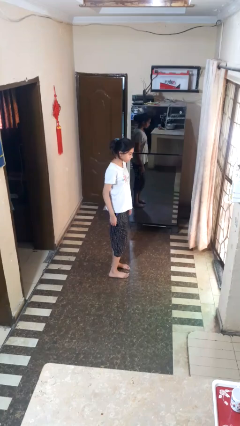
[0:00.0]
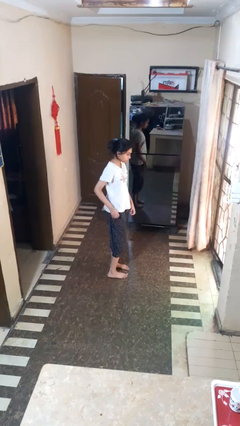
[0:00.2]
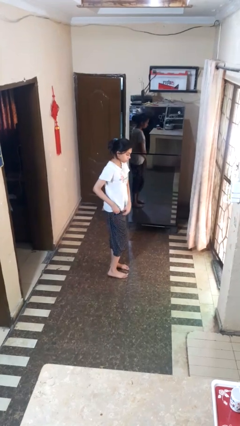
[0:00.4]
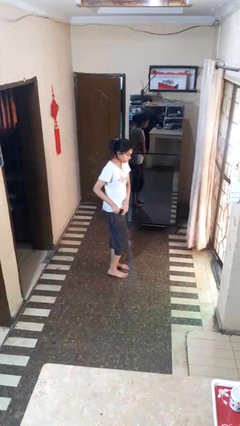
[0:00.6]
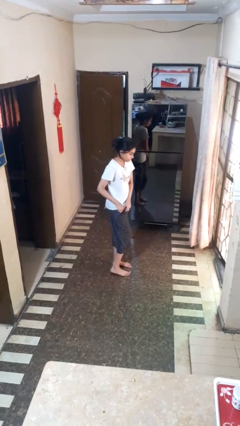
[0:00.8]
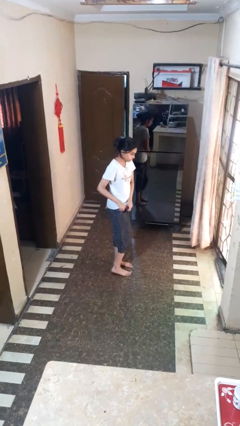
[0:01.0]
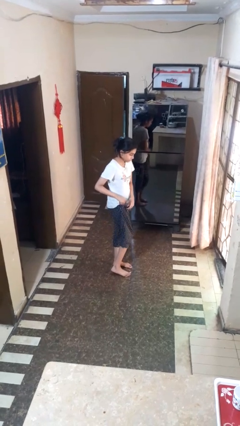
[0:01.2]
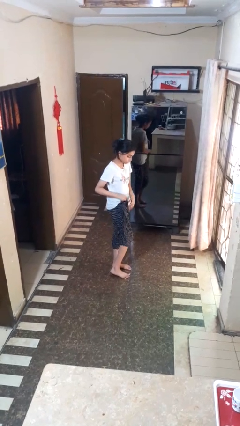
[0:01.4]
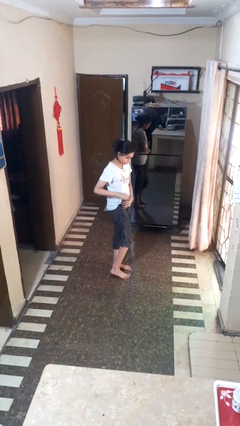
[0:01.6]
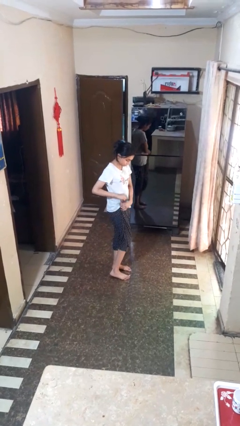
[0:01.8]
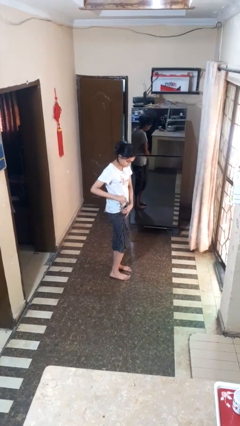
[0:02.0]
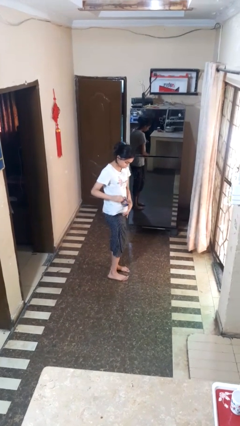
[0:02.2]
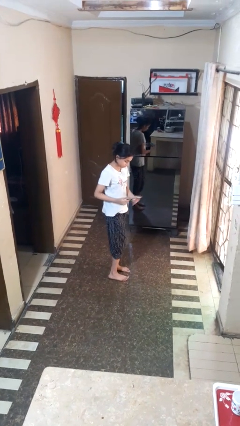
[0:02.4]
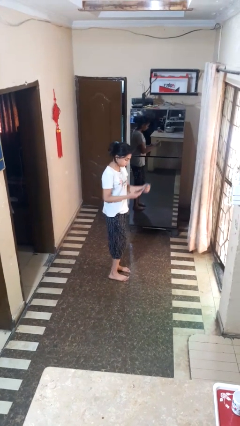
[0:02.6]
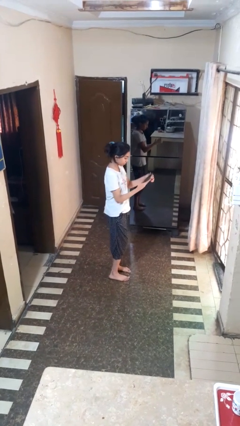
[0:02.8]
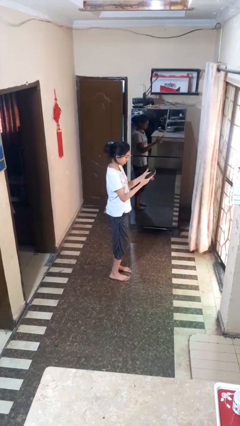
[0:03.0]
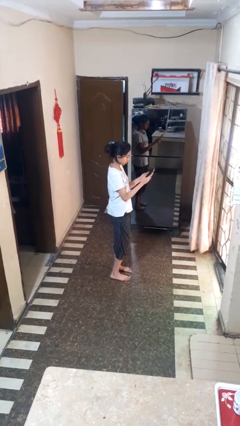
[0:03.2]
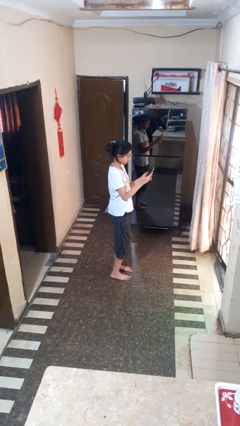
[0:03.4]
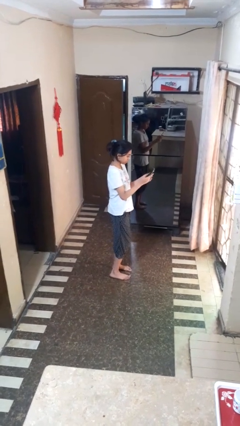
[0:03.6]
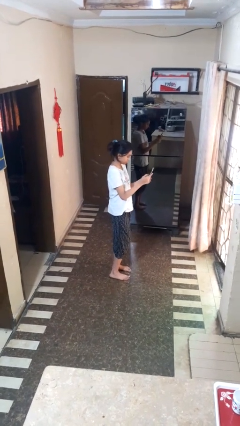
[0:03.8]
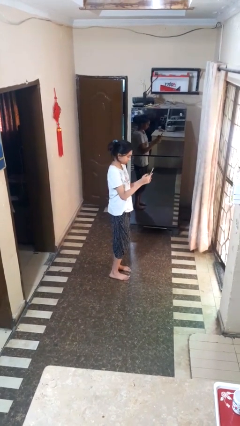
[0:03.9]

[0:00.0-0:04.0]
person takes phone from pocket

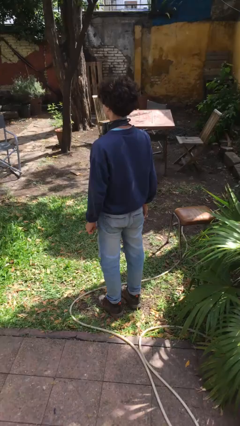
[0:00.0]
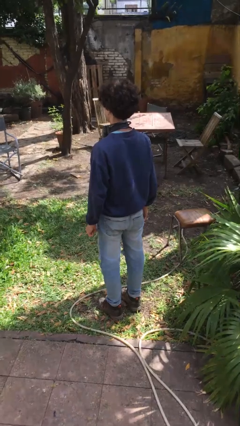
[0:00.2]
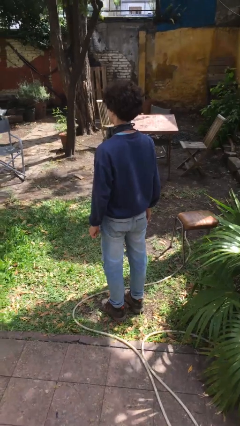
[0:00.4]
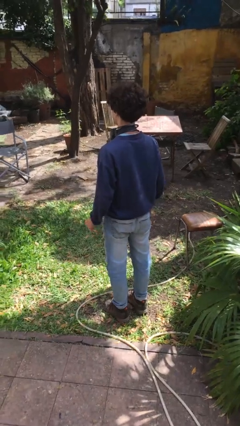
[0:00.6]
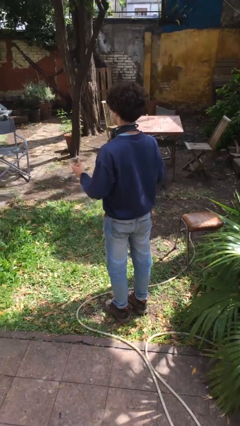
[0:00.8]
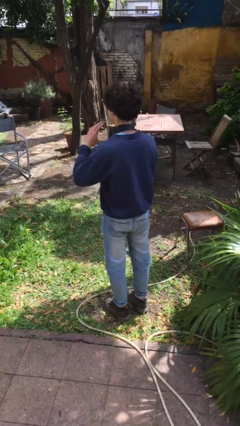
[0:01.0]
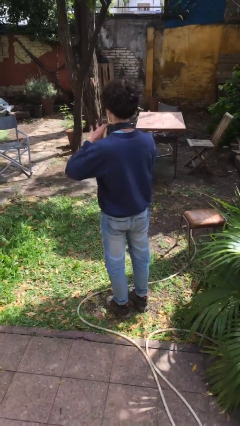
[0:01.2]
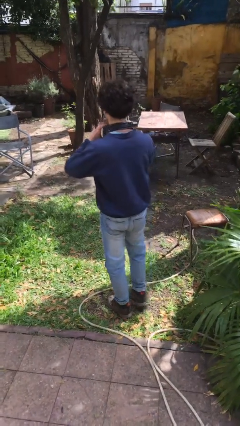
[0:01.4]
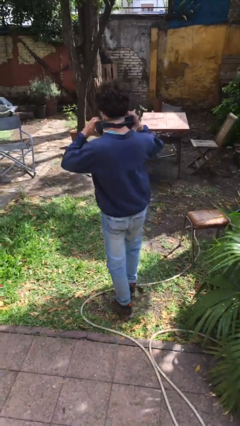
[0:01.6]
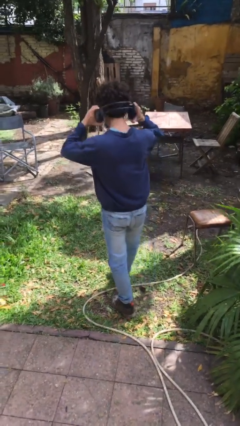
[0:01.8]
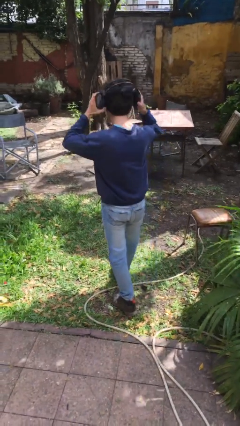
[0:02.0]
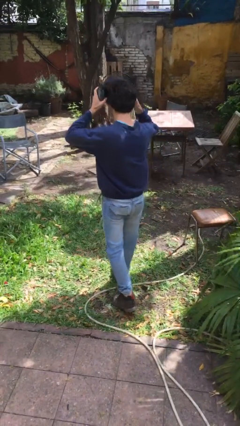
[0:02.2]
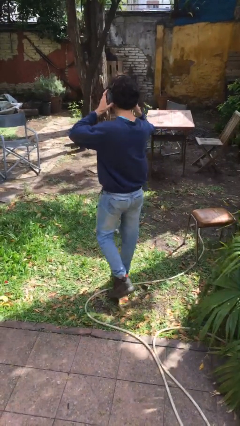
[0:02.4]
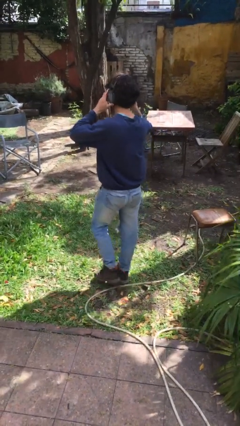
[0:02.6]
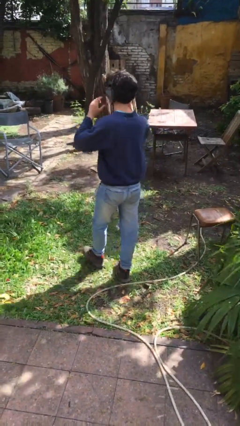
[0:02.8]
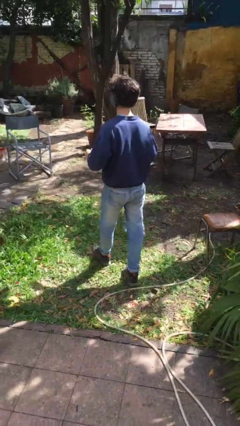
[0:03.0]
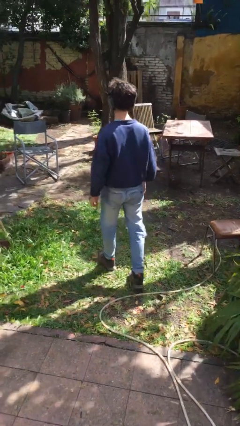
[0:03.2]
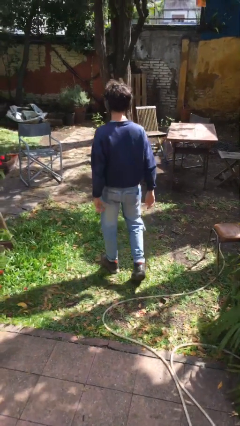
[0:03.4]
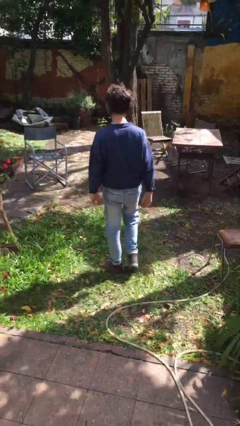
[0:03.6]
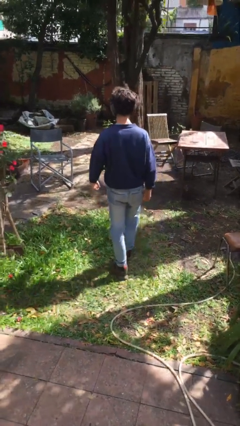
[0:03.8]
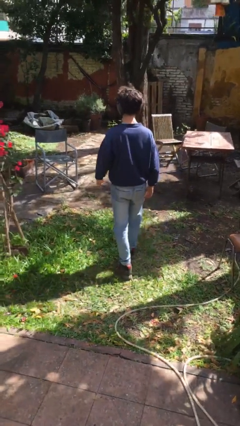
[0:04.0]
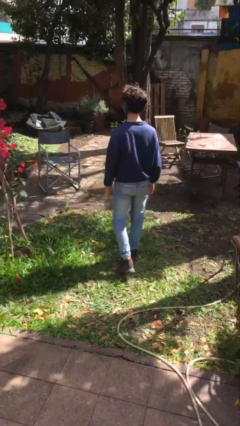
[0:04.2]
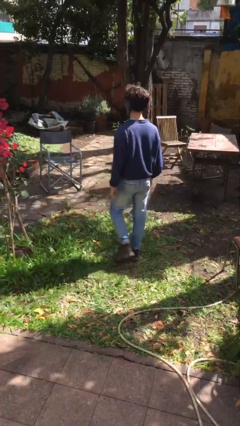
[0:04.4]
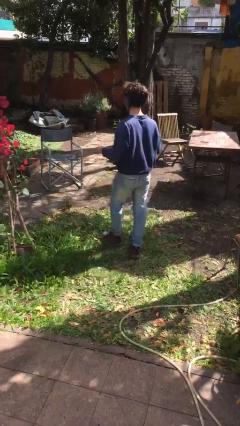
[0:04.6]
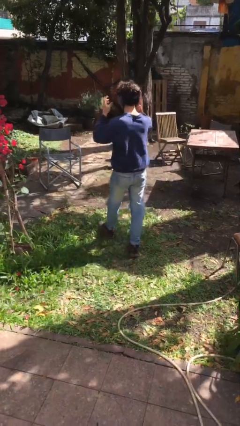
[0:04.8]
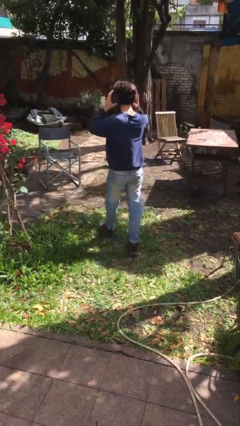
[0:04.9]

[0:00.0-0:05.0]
person puts on headphones

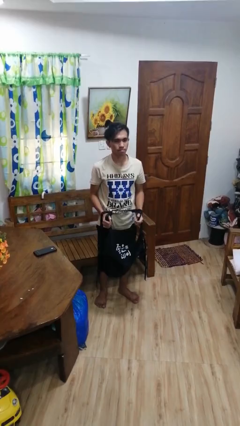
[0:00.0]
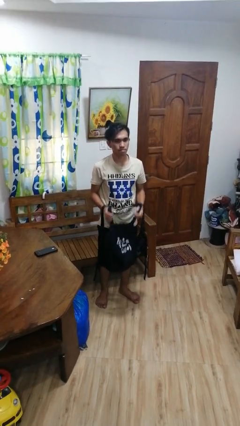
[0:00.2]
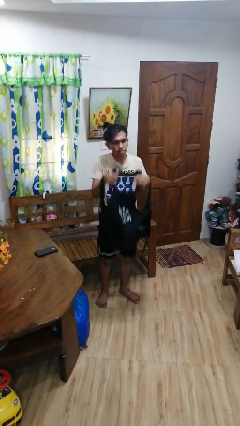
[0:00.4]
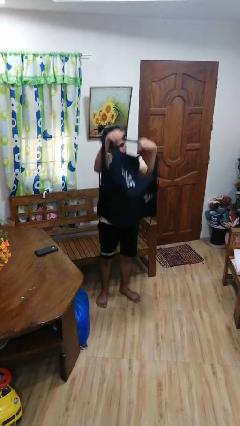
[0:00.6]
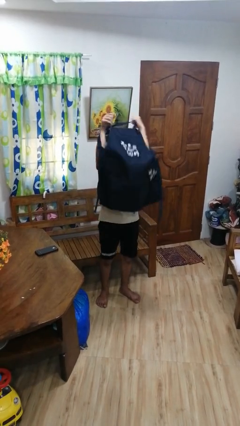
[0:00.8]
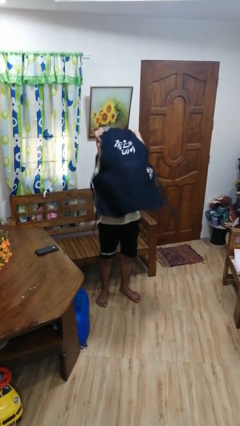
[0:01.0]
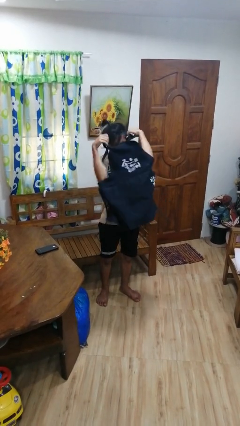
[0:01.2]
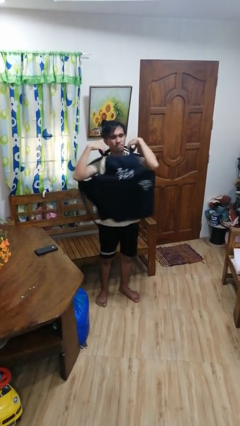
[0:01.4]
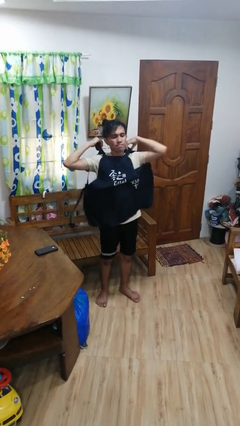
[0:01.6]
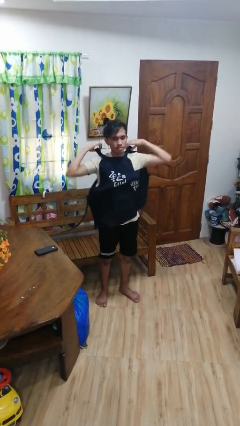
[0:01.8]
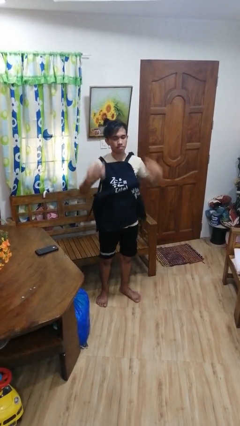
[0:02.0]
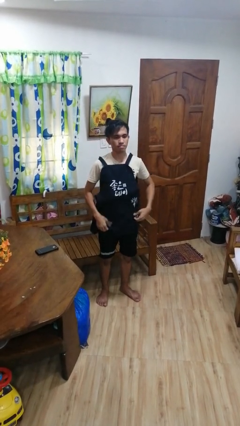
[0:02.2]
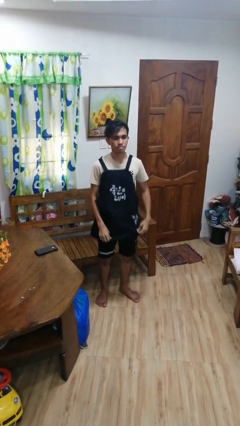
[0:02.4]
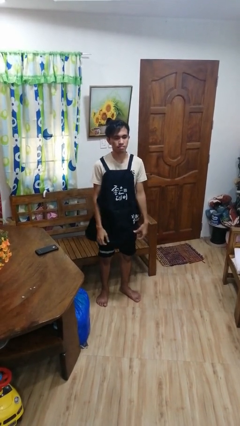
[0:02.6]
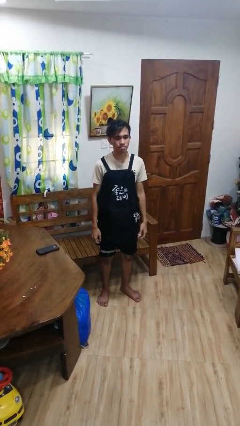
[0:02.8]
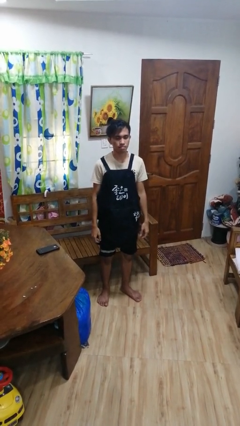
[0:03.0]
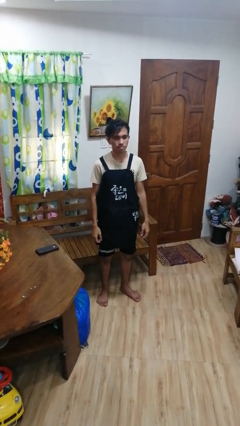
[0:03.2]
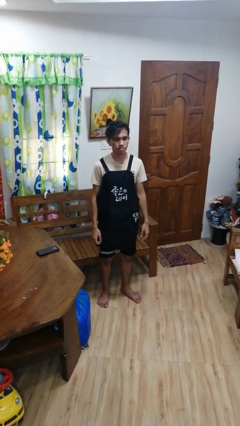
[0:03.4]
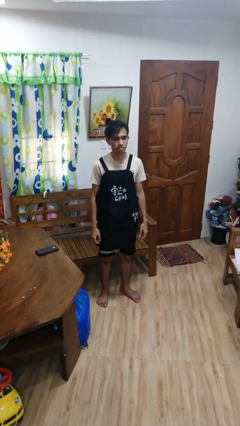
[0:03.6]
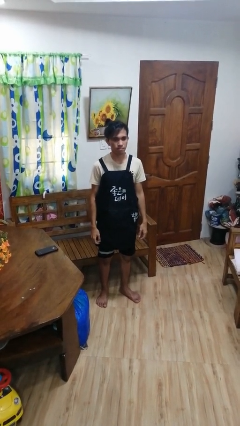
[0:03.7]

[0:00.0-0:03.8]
person puts on apron

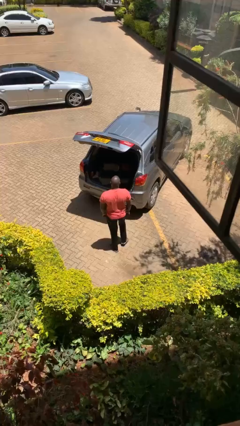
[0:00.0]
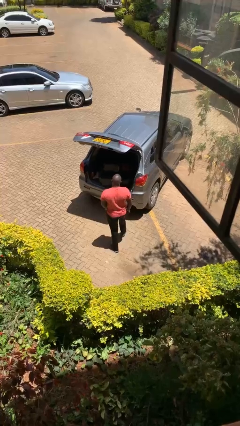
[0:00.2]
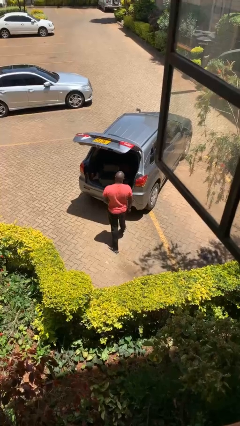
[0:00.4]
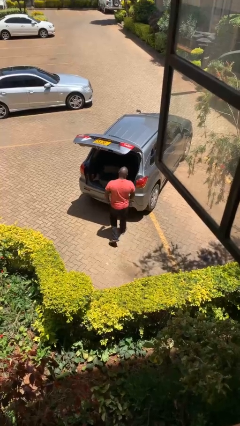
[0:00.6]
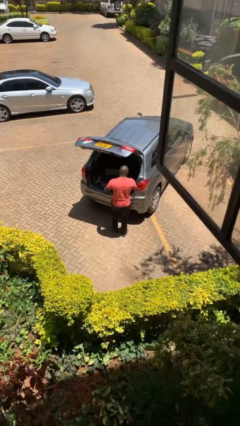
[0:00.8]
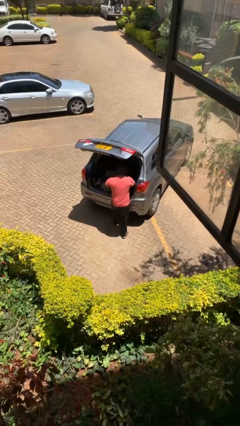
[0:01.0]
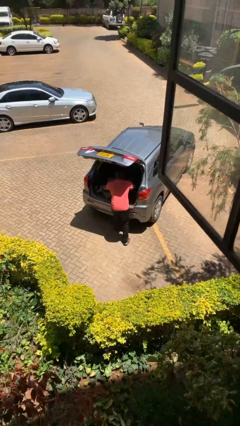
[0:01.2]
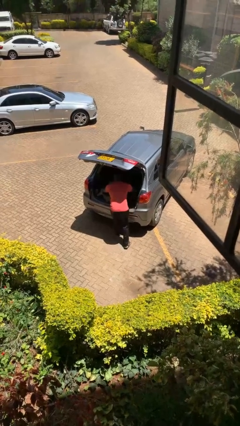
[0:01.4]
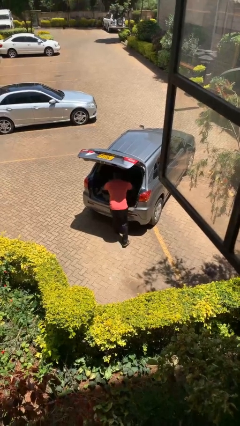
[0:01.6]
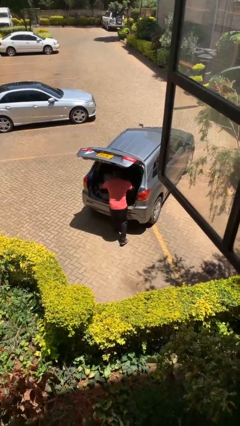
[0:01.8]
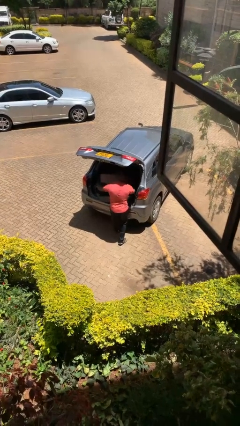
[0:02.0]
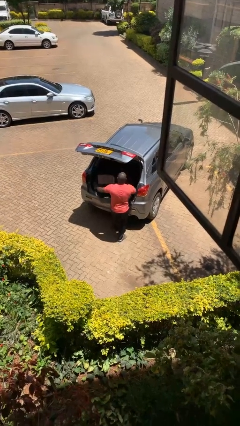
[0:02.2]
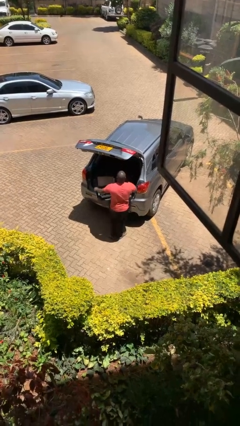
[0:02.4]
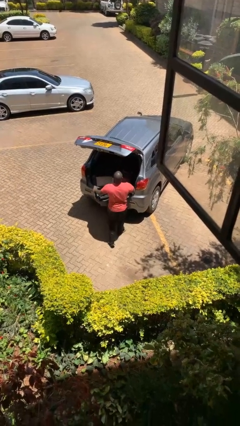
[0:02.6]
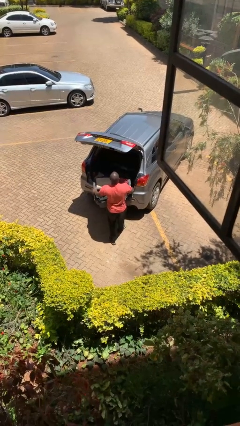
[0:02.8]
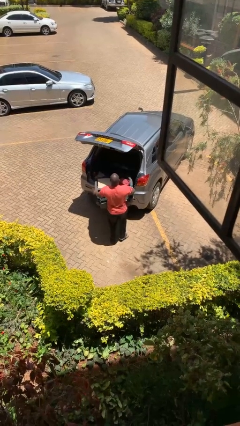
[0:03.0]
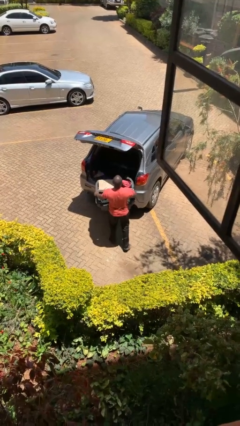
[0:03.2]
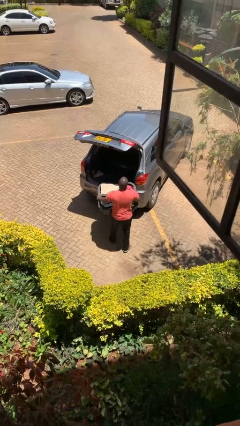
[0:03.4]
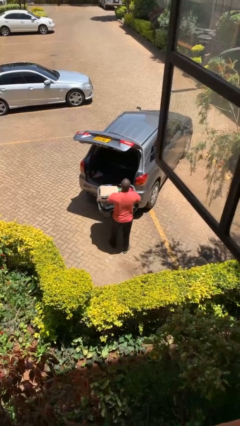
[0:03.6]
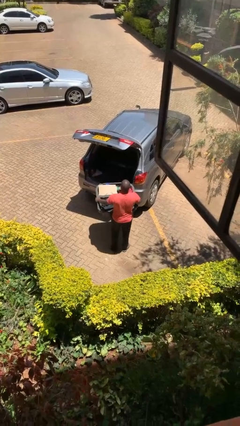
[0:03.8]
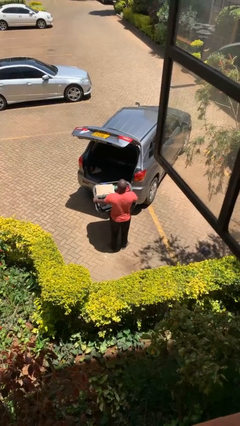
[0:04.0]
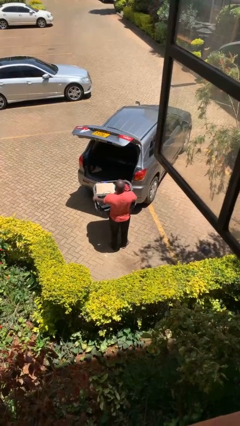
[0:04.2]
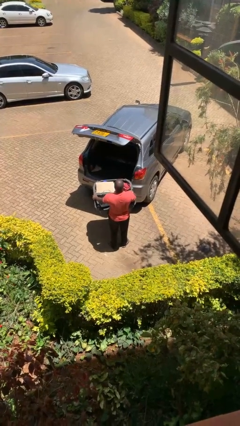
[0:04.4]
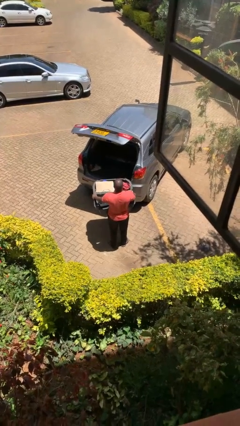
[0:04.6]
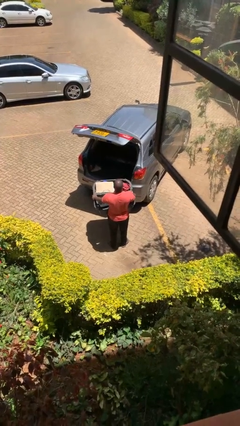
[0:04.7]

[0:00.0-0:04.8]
person unloads car
